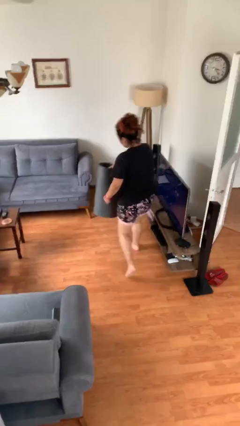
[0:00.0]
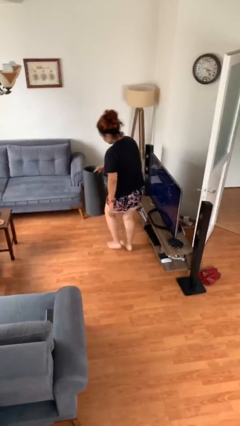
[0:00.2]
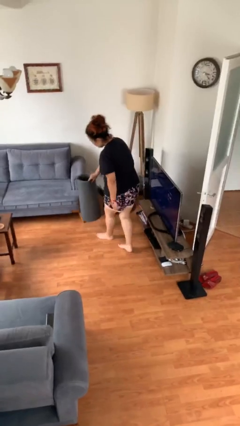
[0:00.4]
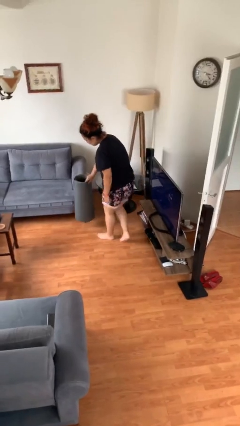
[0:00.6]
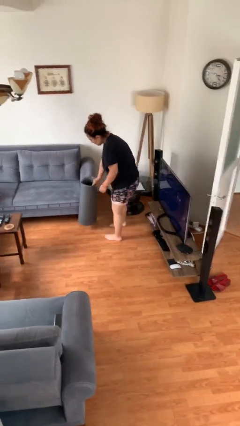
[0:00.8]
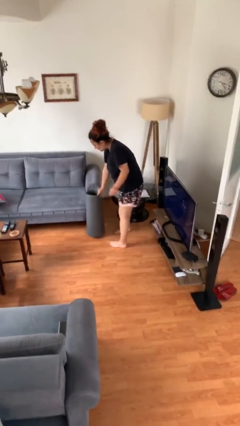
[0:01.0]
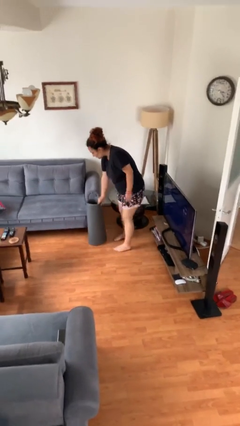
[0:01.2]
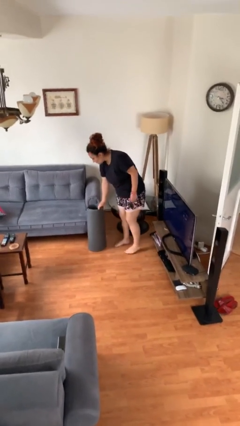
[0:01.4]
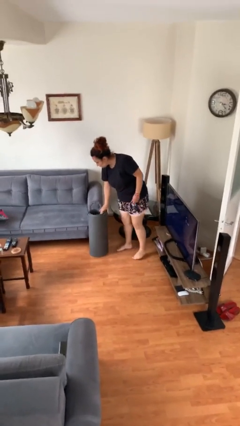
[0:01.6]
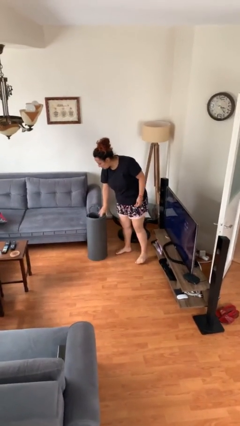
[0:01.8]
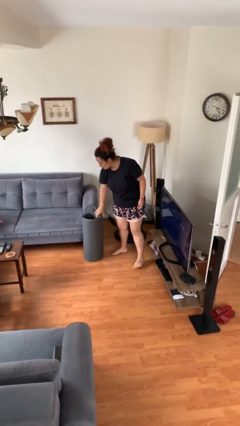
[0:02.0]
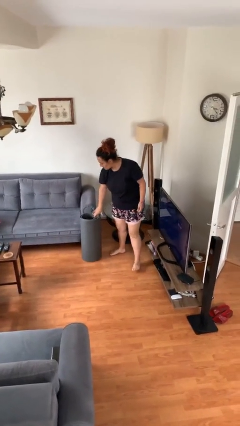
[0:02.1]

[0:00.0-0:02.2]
person puts down object on floor

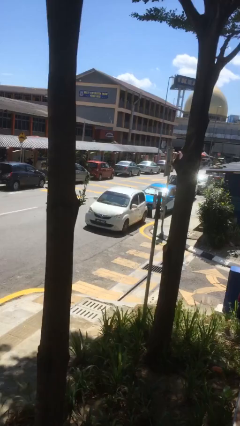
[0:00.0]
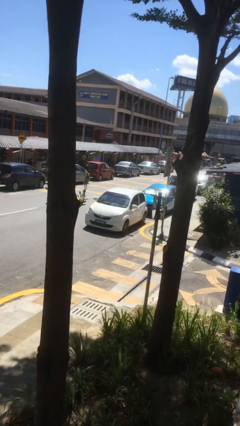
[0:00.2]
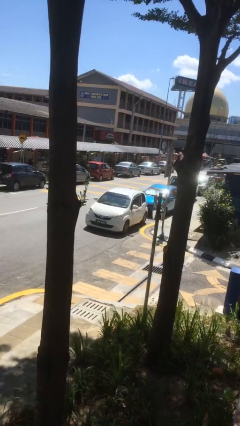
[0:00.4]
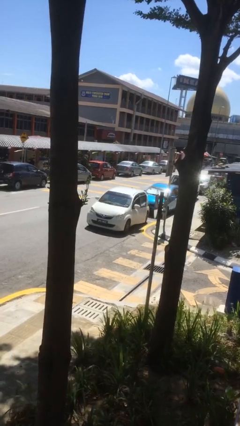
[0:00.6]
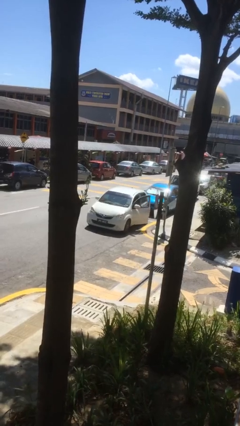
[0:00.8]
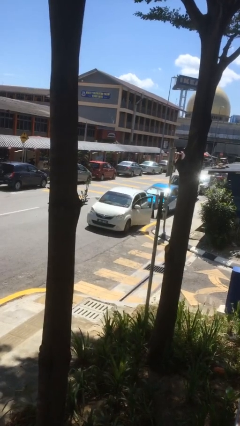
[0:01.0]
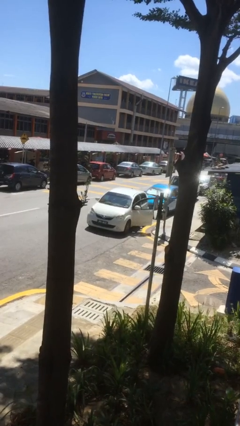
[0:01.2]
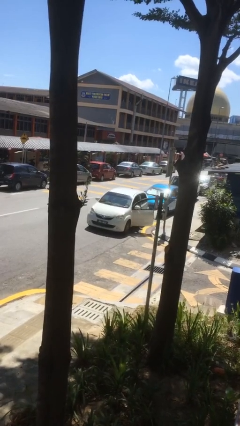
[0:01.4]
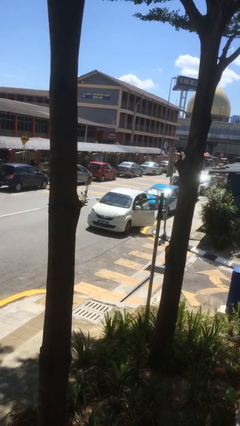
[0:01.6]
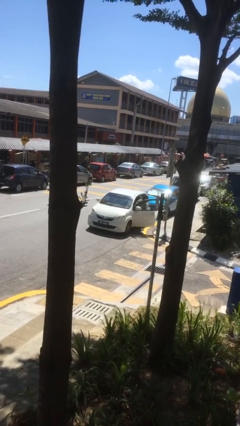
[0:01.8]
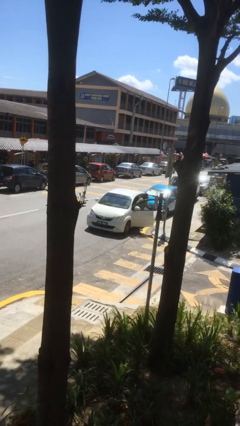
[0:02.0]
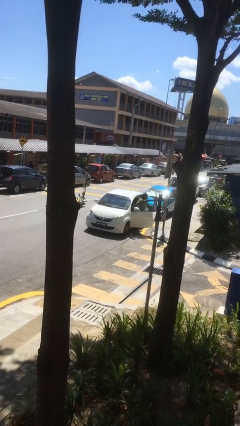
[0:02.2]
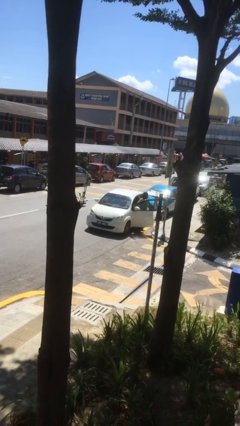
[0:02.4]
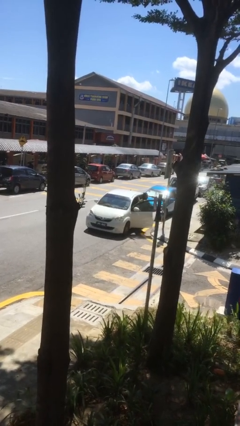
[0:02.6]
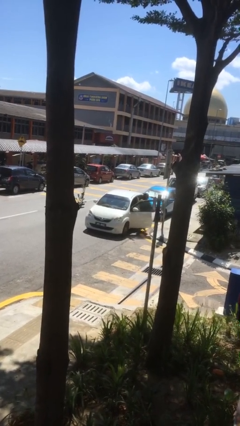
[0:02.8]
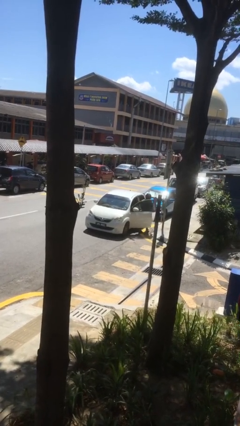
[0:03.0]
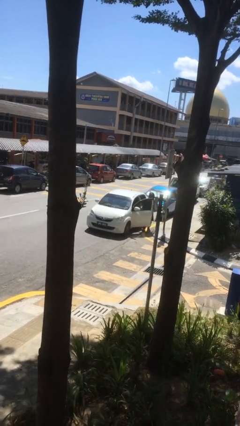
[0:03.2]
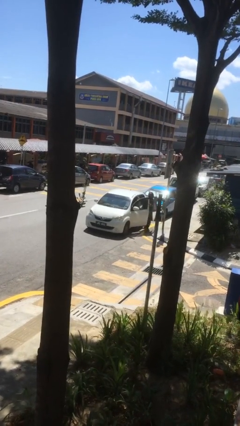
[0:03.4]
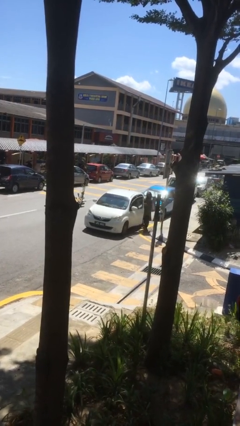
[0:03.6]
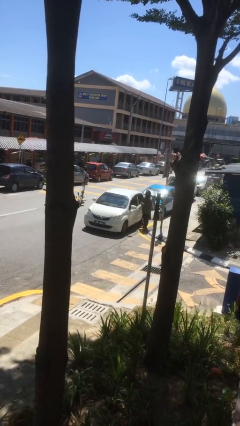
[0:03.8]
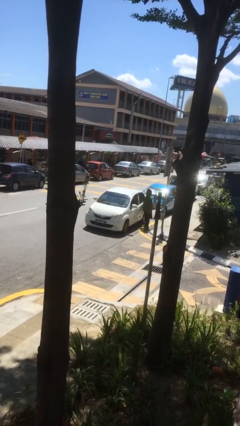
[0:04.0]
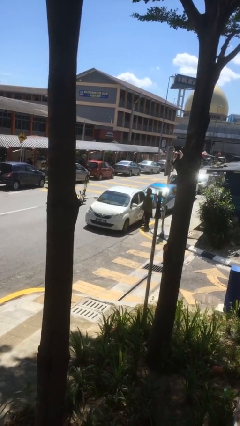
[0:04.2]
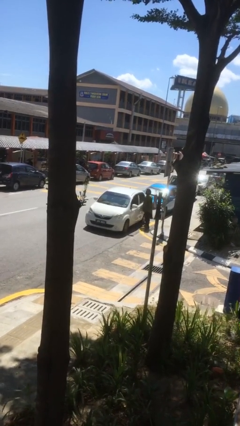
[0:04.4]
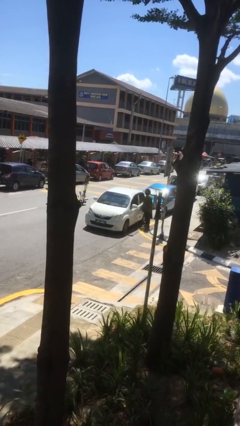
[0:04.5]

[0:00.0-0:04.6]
car drops off person

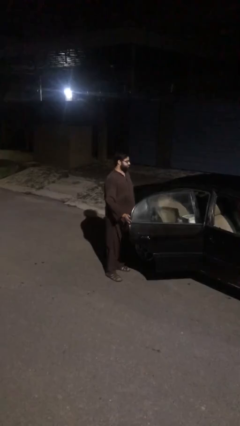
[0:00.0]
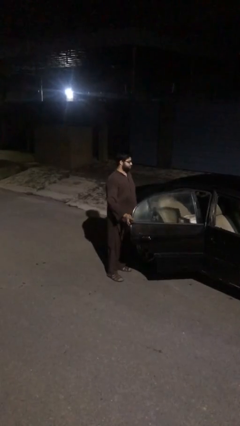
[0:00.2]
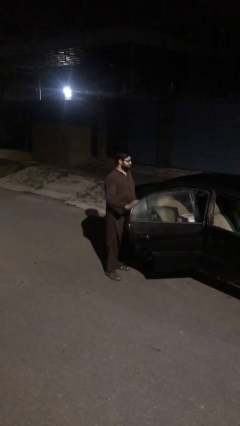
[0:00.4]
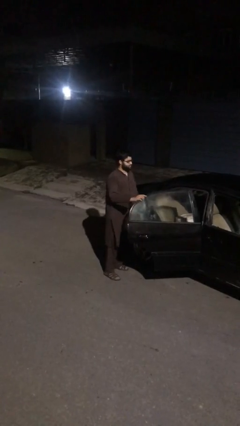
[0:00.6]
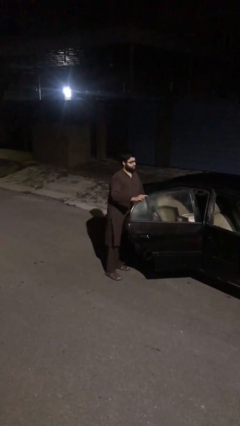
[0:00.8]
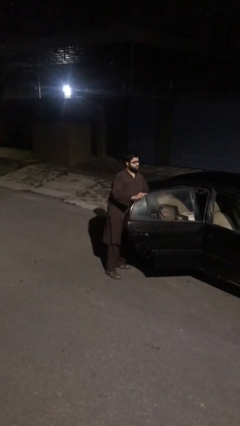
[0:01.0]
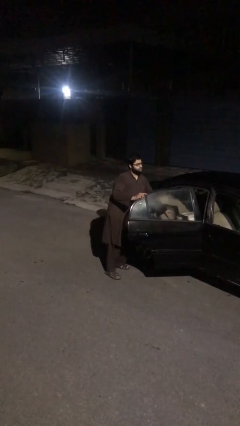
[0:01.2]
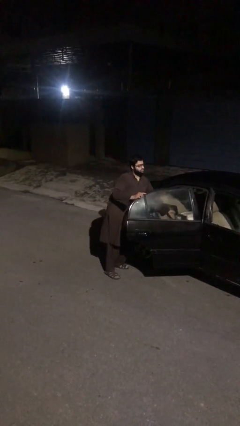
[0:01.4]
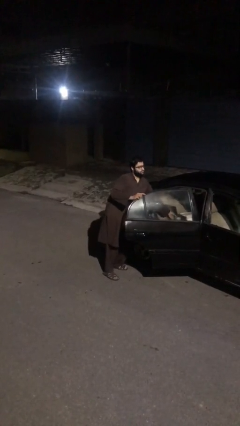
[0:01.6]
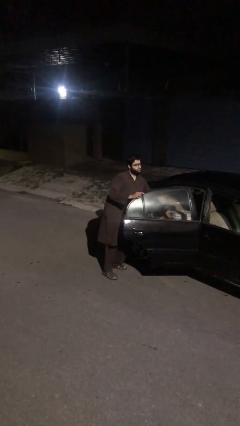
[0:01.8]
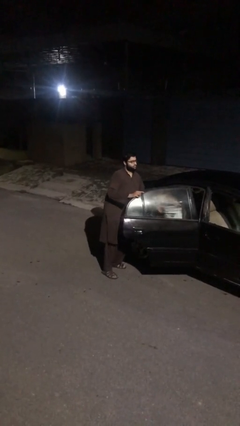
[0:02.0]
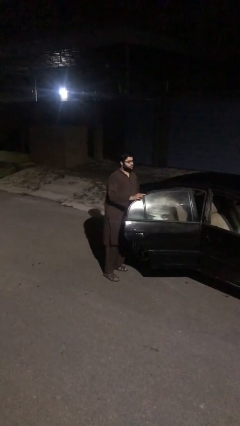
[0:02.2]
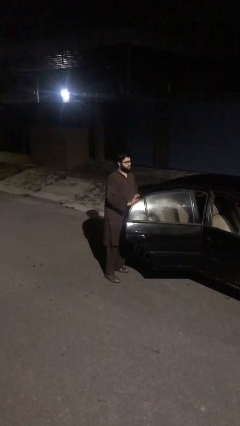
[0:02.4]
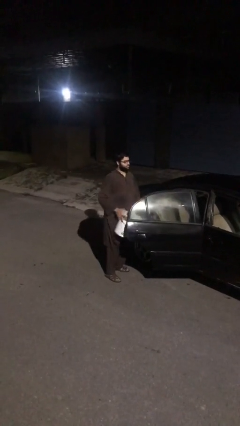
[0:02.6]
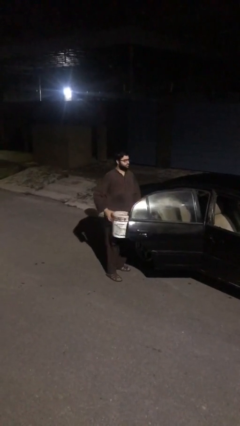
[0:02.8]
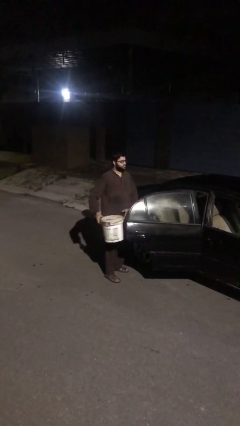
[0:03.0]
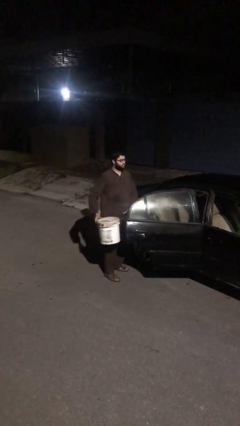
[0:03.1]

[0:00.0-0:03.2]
person unloads car

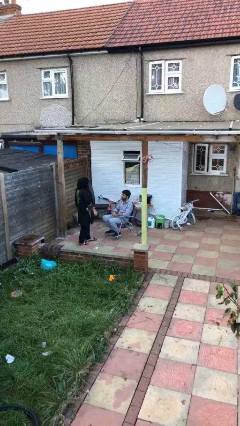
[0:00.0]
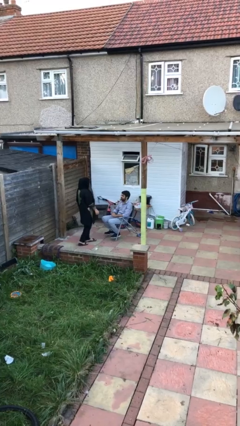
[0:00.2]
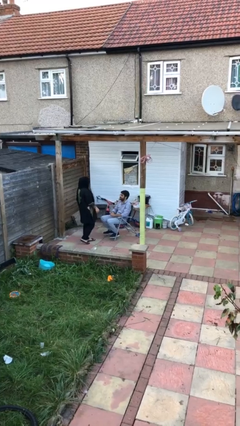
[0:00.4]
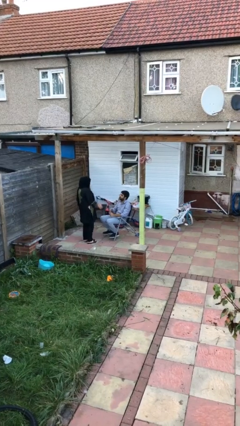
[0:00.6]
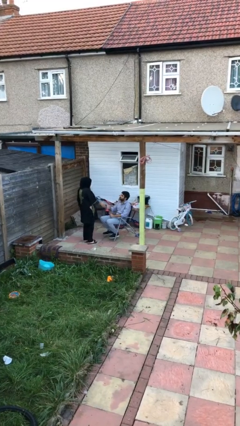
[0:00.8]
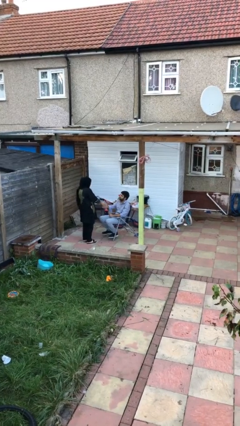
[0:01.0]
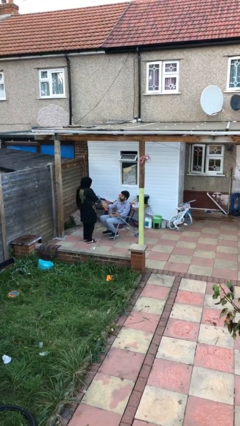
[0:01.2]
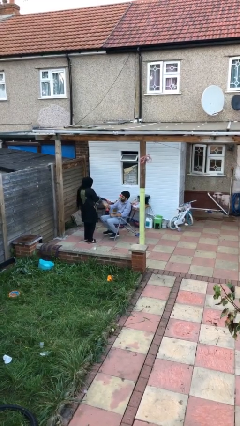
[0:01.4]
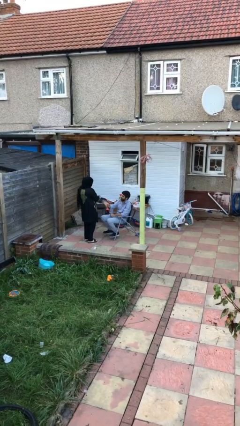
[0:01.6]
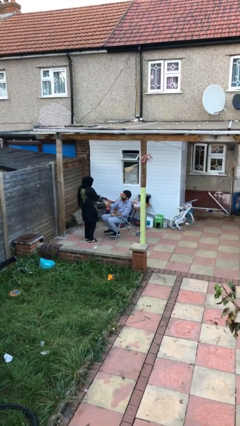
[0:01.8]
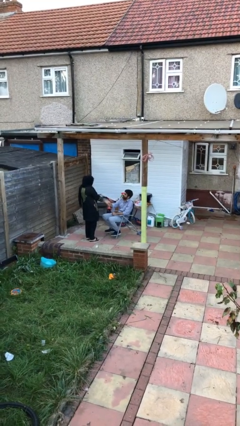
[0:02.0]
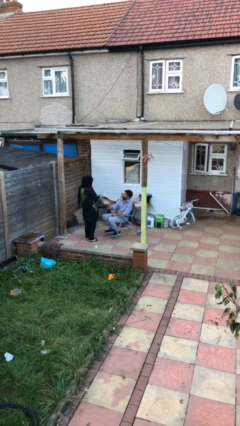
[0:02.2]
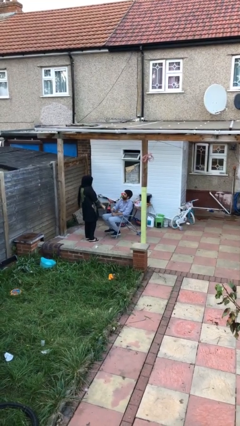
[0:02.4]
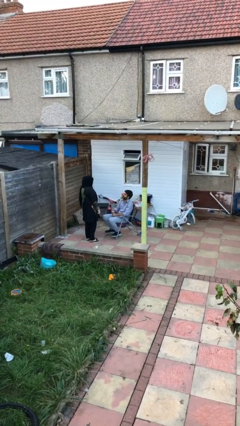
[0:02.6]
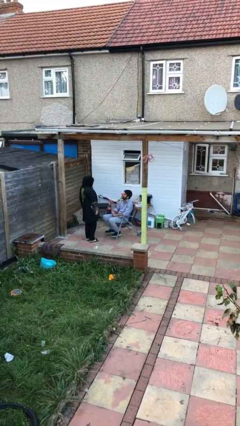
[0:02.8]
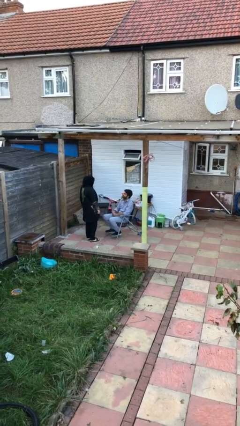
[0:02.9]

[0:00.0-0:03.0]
person shakes hand

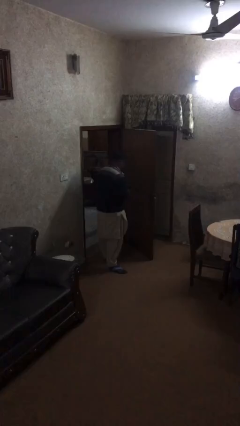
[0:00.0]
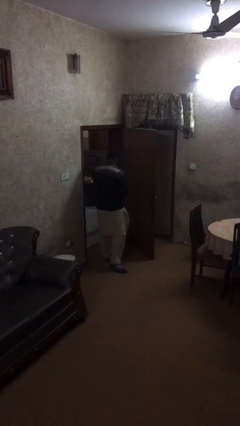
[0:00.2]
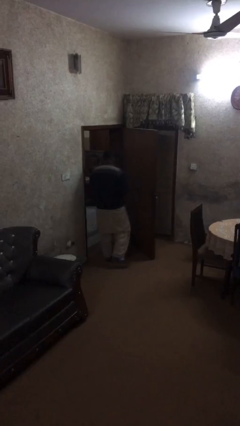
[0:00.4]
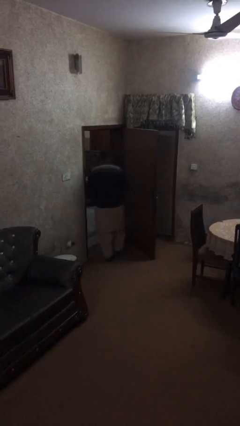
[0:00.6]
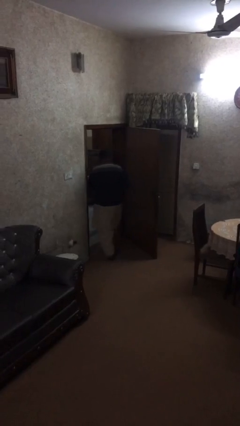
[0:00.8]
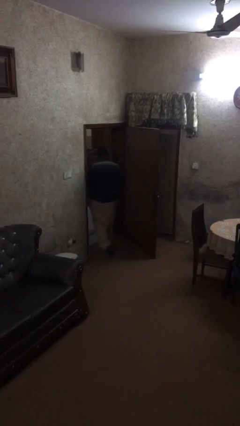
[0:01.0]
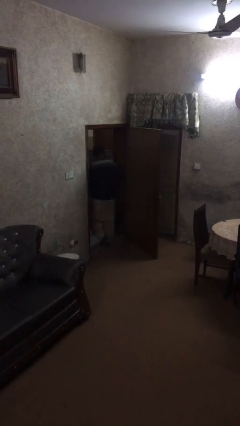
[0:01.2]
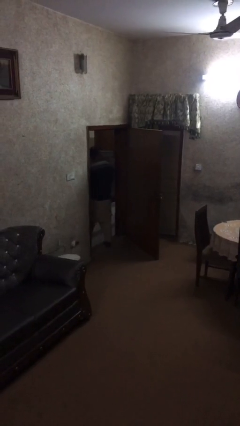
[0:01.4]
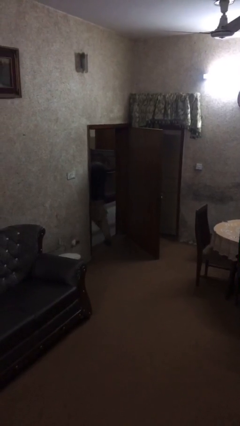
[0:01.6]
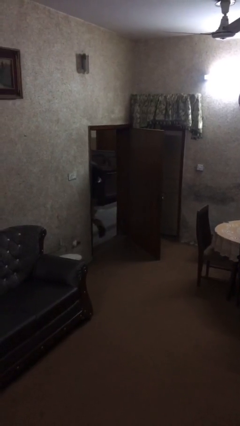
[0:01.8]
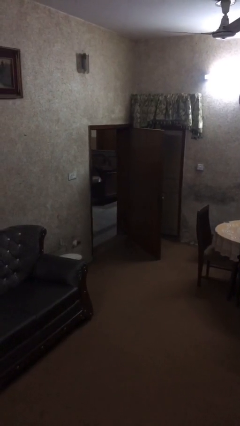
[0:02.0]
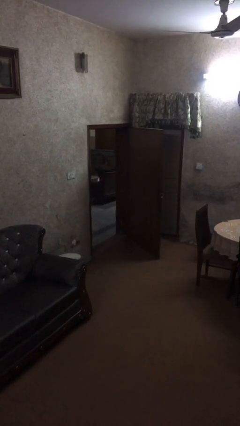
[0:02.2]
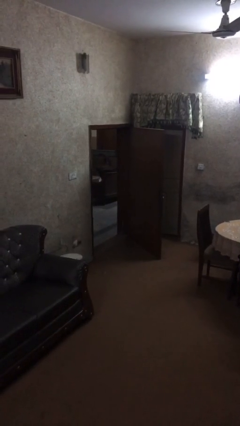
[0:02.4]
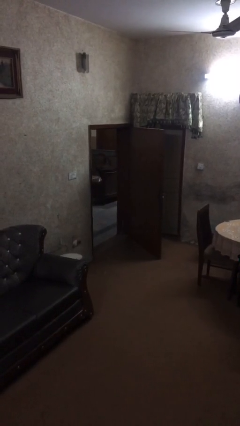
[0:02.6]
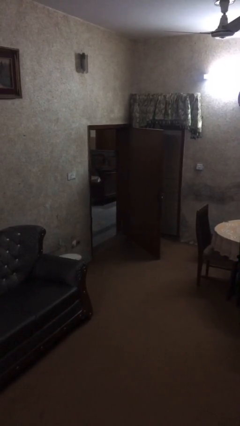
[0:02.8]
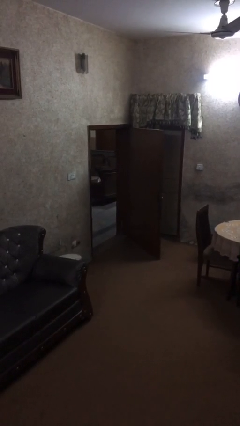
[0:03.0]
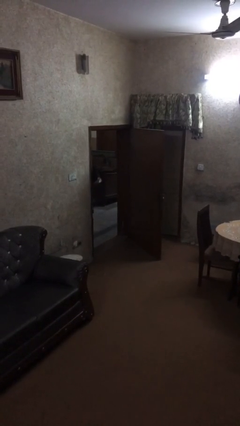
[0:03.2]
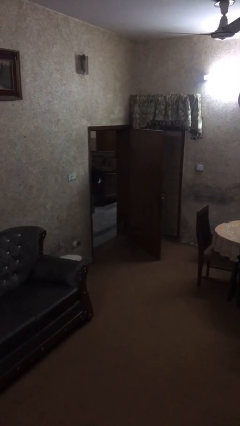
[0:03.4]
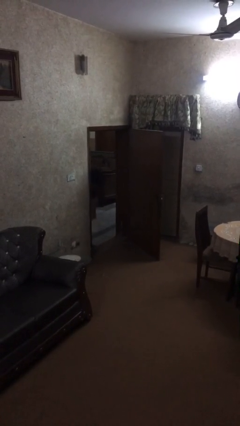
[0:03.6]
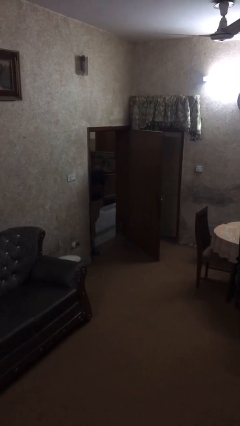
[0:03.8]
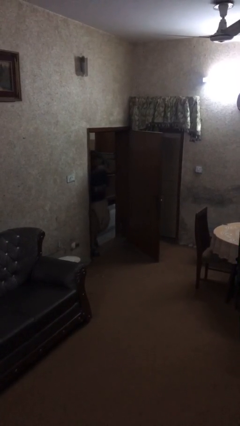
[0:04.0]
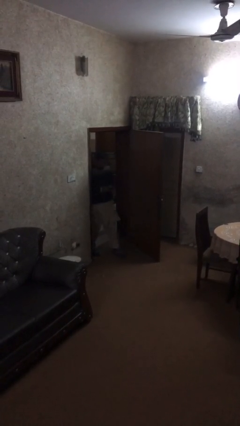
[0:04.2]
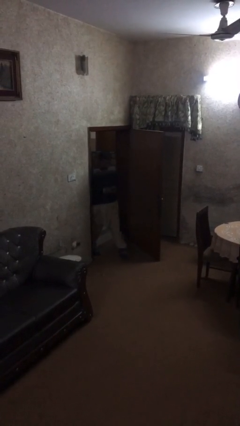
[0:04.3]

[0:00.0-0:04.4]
person exits scene through structure
